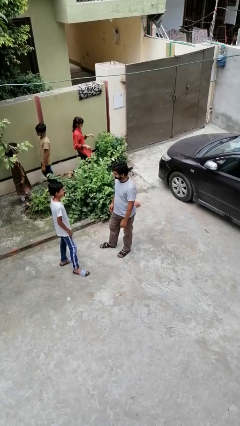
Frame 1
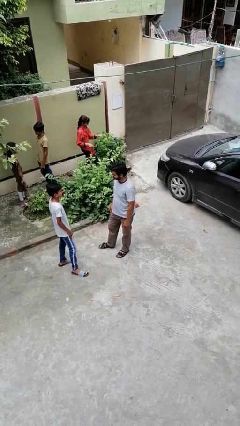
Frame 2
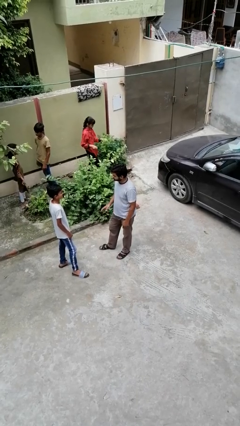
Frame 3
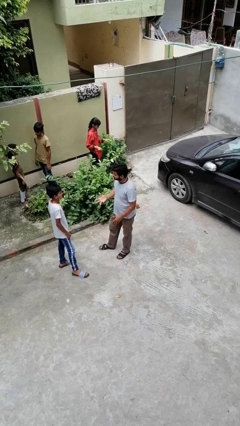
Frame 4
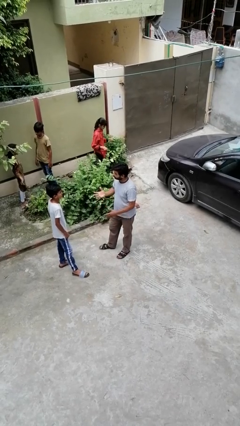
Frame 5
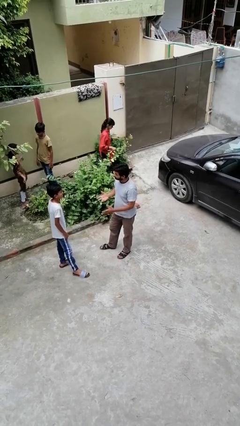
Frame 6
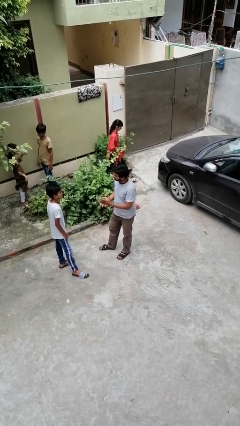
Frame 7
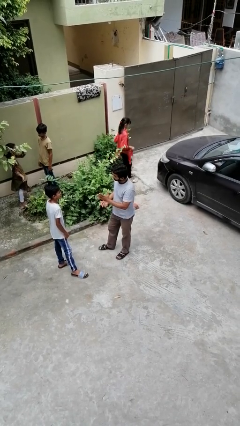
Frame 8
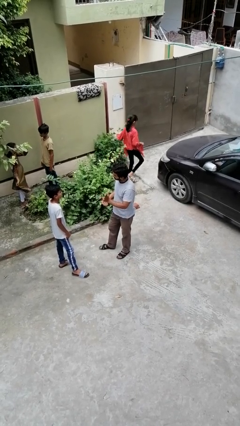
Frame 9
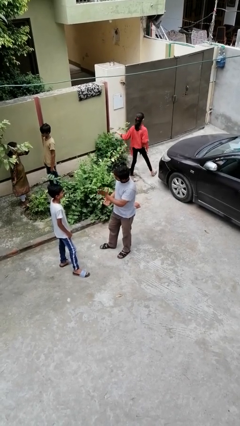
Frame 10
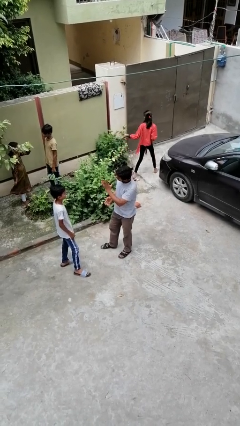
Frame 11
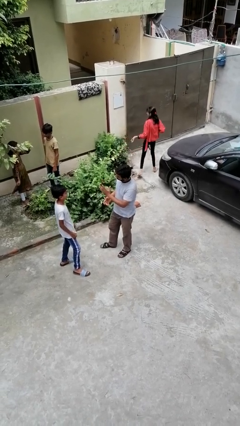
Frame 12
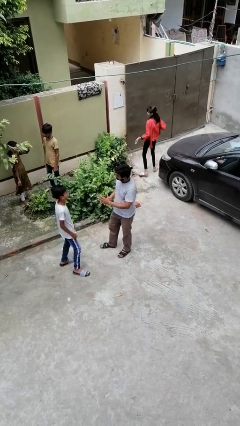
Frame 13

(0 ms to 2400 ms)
person talks to person

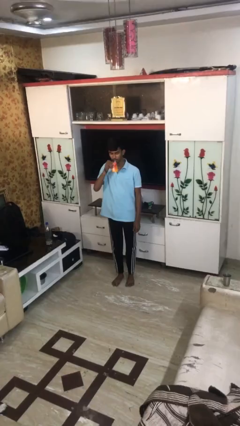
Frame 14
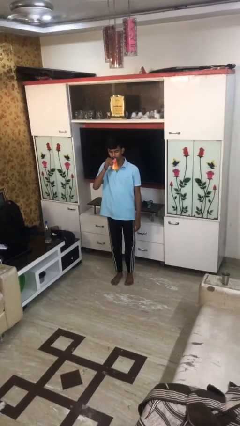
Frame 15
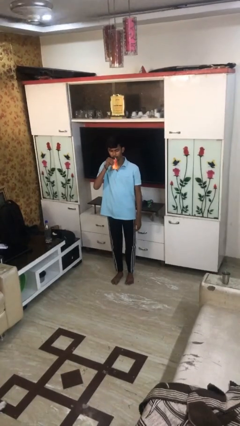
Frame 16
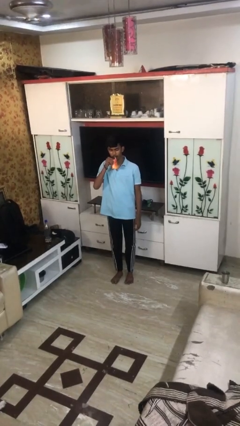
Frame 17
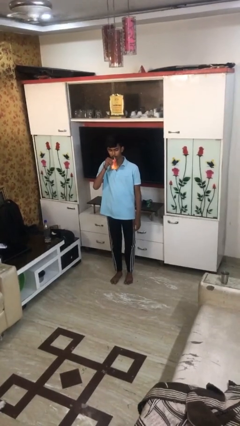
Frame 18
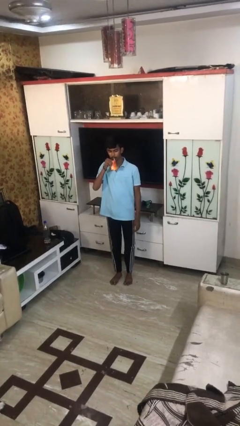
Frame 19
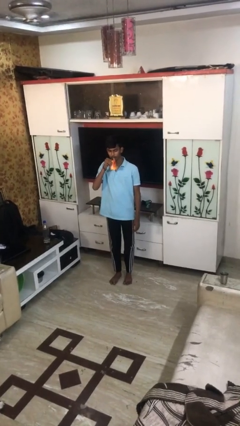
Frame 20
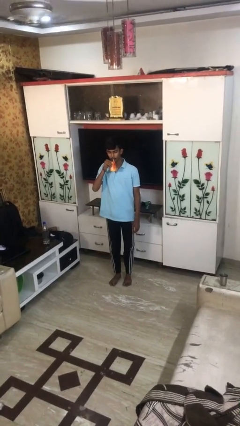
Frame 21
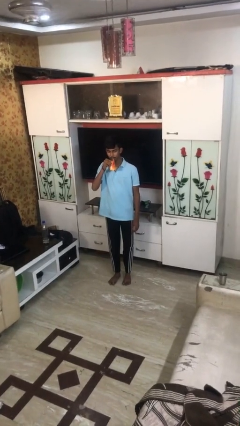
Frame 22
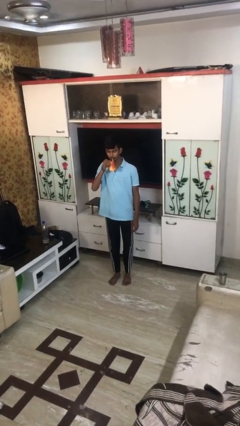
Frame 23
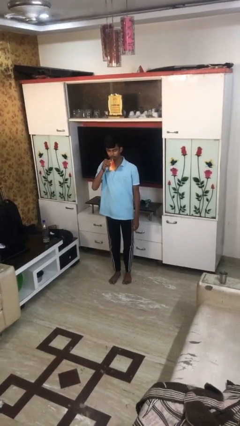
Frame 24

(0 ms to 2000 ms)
person drinks from straw

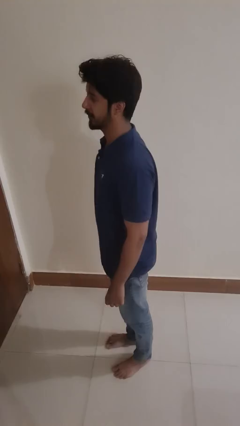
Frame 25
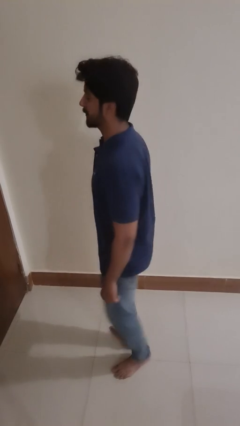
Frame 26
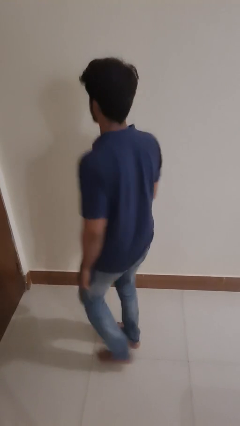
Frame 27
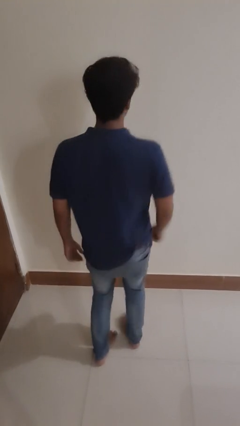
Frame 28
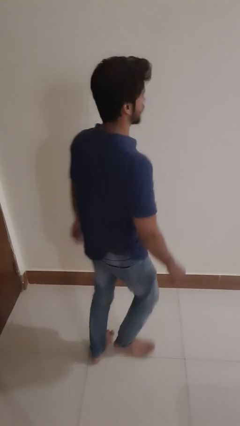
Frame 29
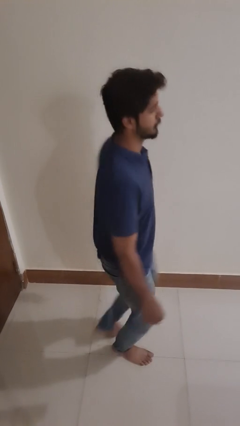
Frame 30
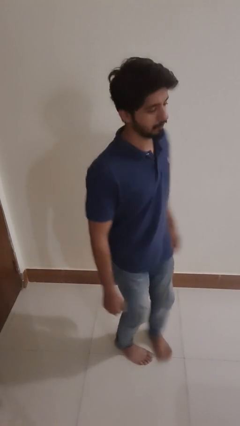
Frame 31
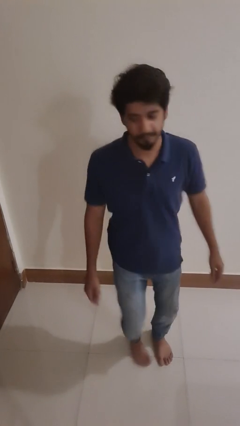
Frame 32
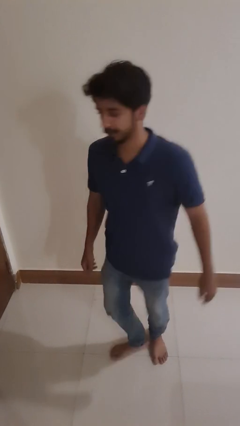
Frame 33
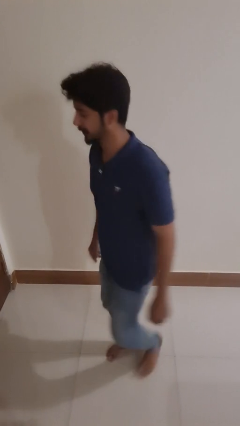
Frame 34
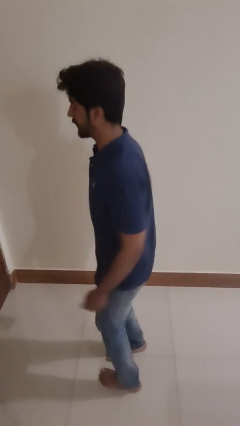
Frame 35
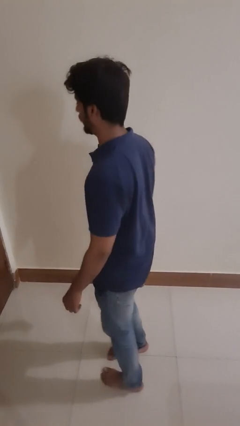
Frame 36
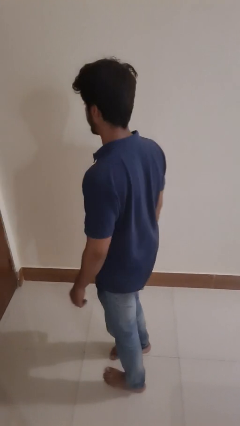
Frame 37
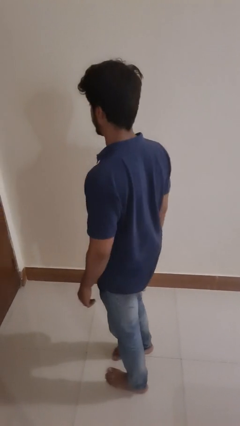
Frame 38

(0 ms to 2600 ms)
person twirls

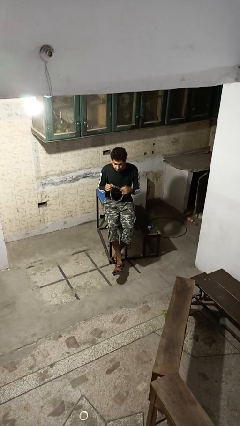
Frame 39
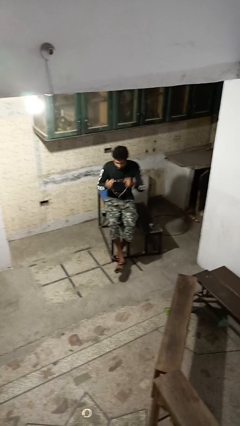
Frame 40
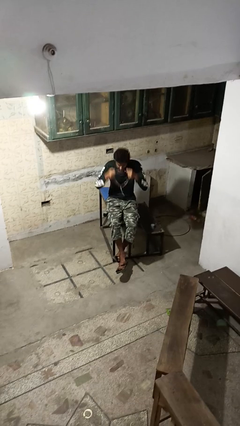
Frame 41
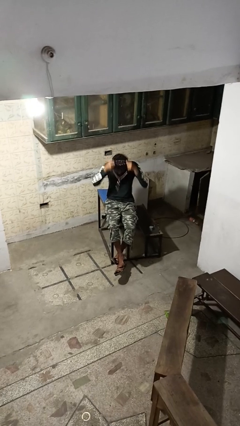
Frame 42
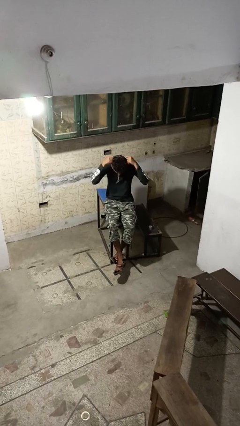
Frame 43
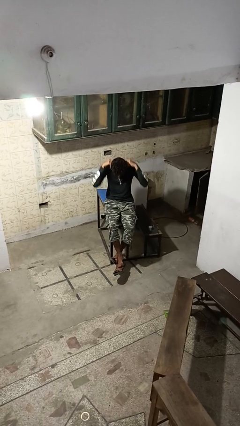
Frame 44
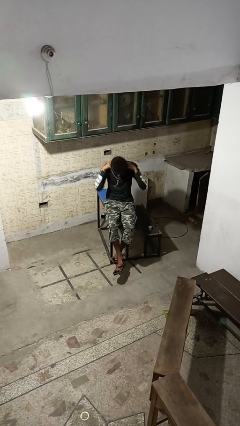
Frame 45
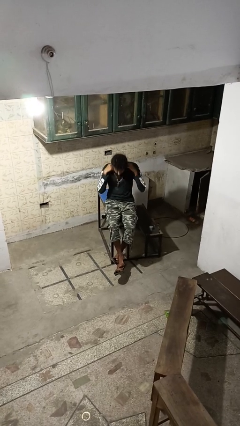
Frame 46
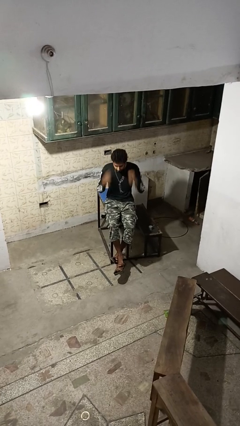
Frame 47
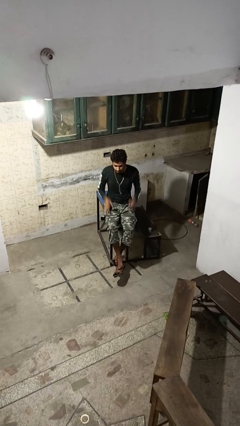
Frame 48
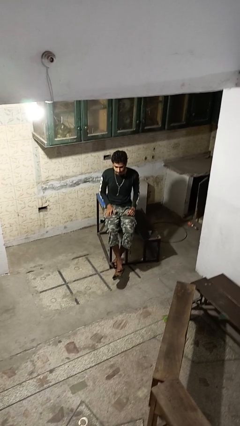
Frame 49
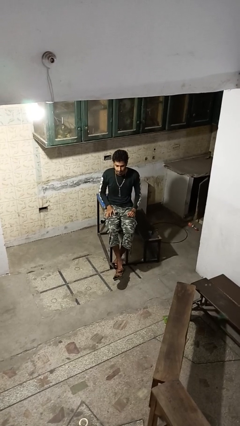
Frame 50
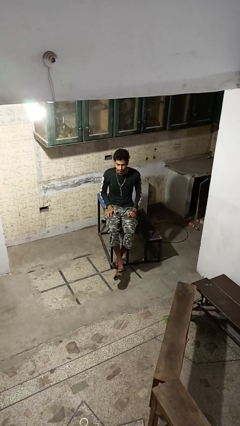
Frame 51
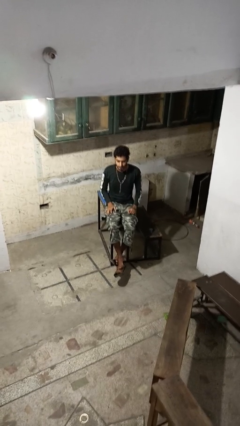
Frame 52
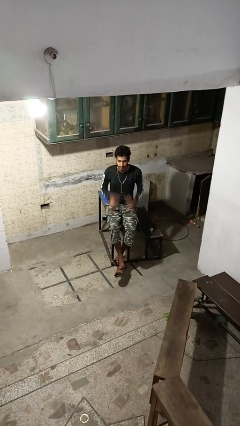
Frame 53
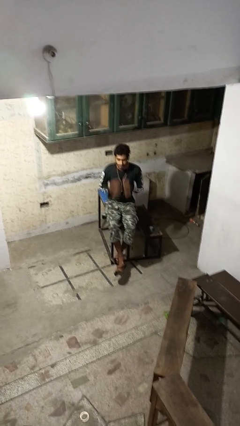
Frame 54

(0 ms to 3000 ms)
person puts on necklace

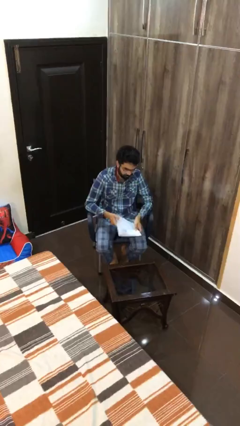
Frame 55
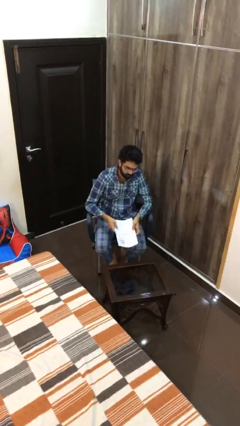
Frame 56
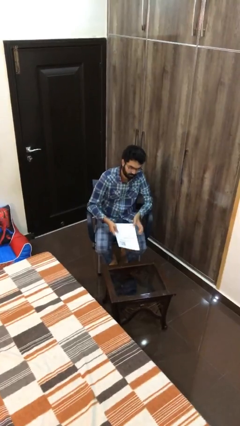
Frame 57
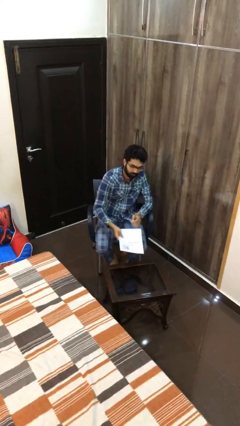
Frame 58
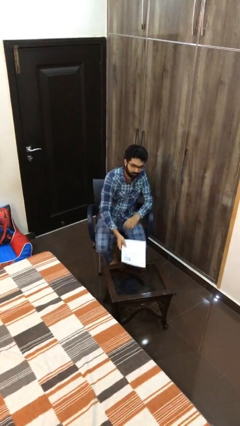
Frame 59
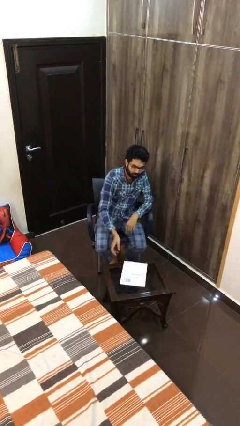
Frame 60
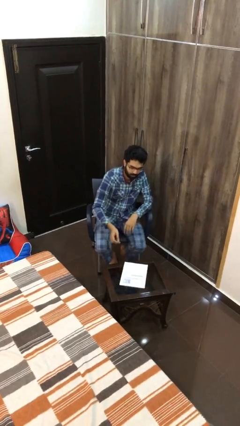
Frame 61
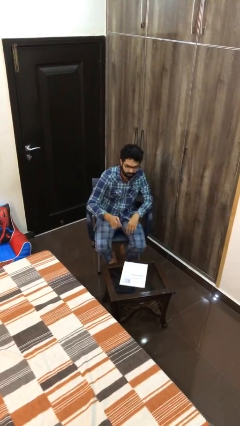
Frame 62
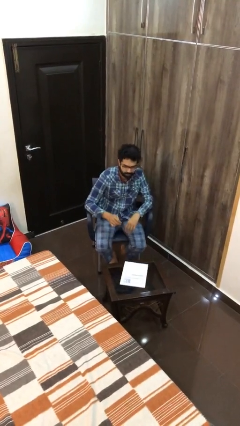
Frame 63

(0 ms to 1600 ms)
person puts down object on table

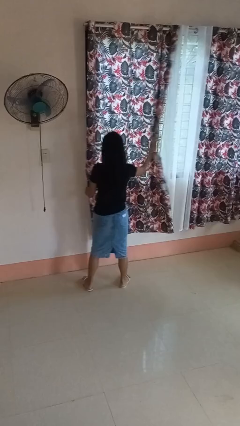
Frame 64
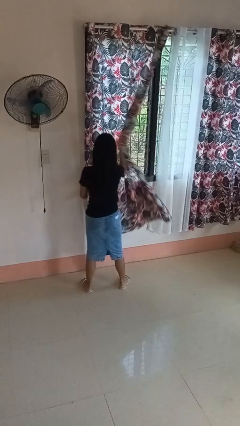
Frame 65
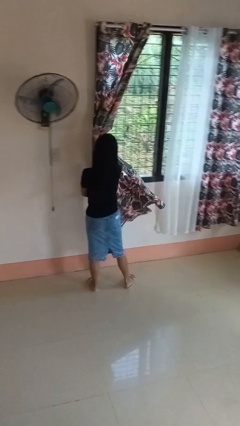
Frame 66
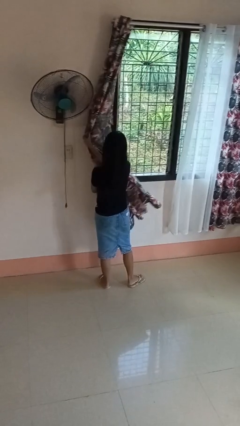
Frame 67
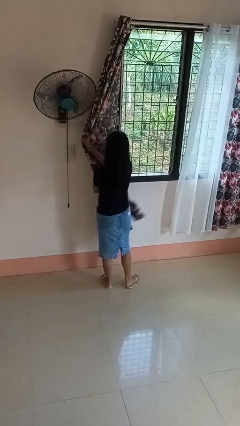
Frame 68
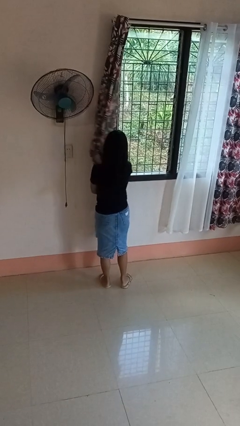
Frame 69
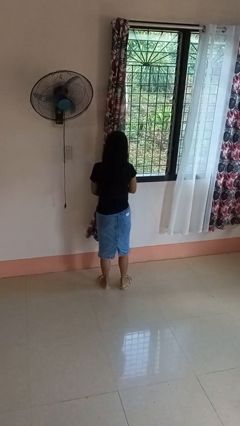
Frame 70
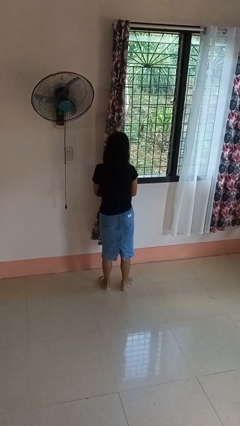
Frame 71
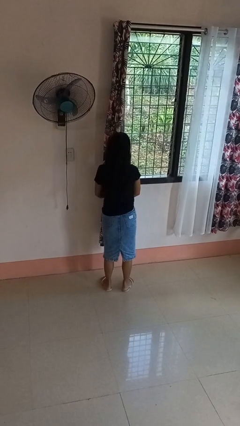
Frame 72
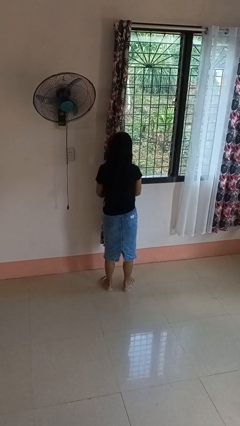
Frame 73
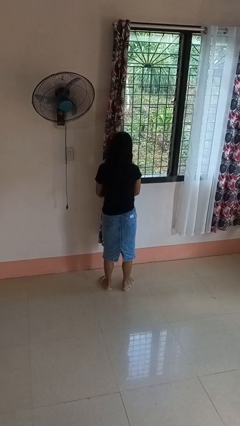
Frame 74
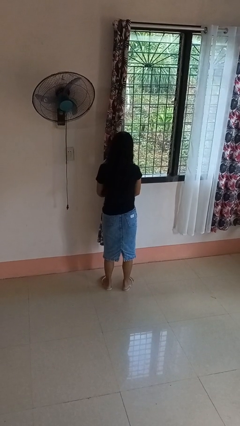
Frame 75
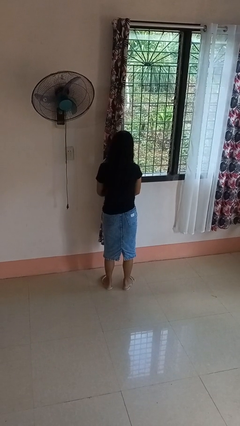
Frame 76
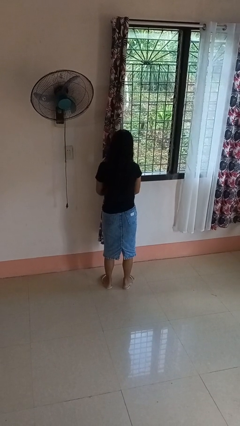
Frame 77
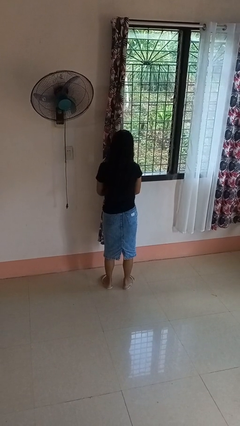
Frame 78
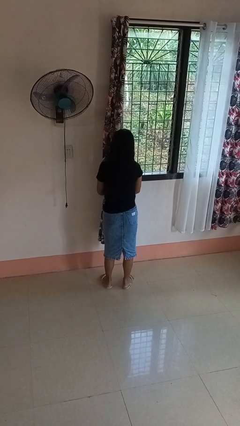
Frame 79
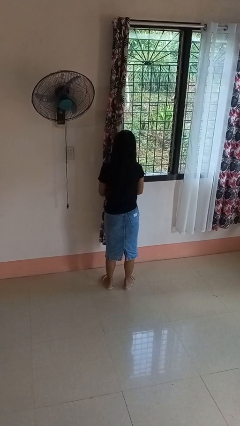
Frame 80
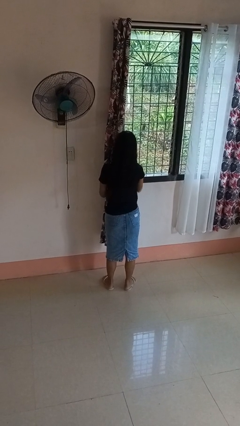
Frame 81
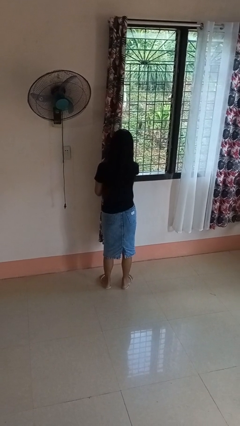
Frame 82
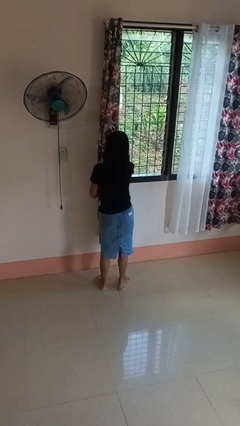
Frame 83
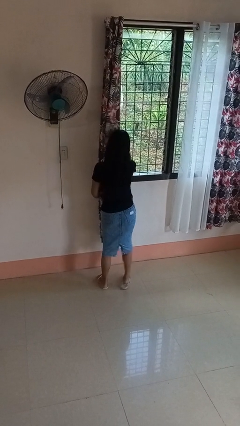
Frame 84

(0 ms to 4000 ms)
person opens curtains

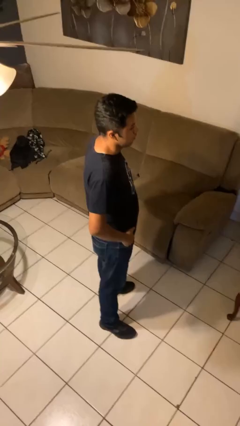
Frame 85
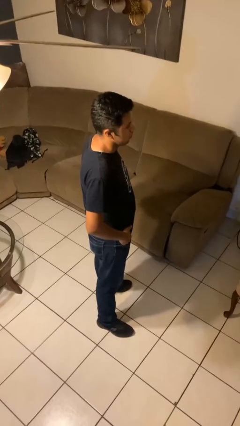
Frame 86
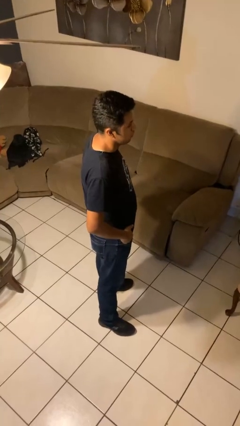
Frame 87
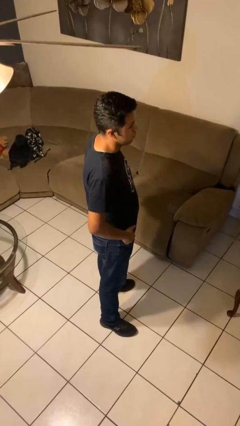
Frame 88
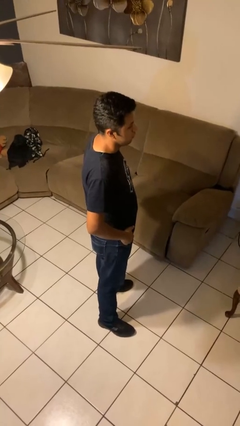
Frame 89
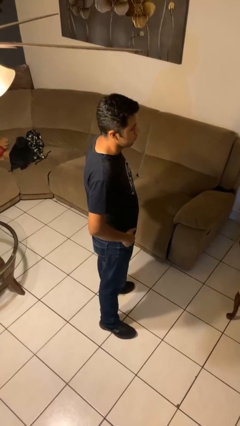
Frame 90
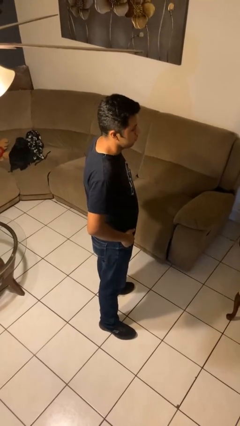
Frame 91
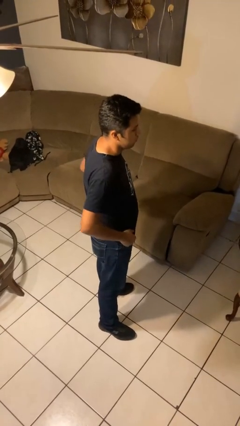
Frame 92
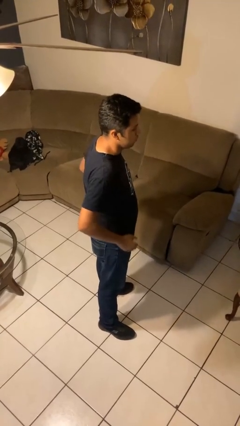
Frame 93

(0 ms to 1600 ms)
person puts hands in back pockets
